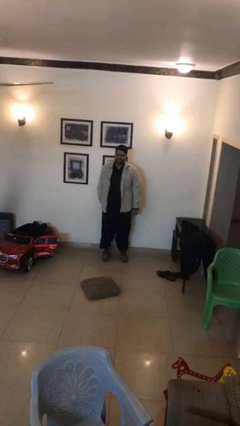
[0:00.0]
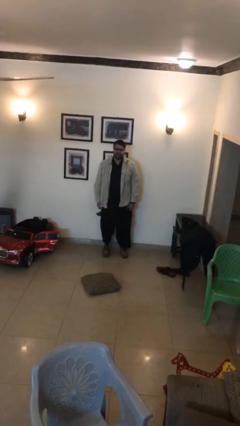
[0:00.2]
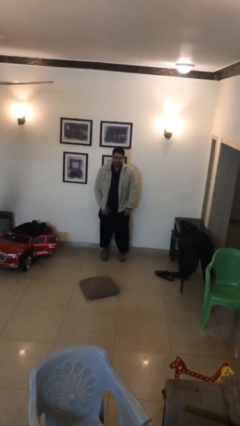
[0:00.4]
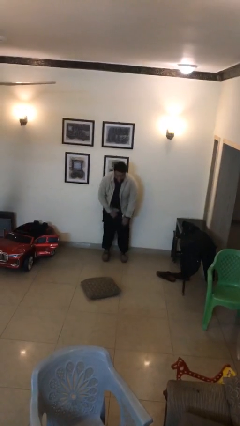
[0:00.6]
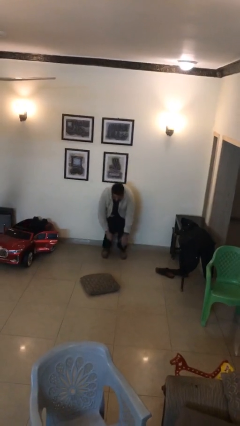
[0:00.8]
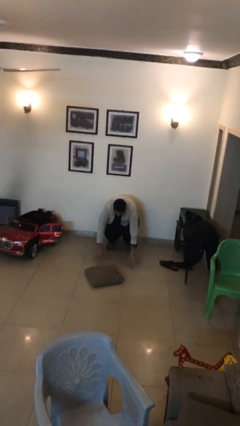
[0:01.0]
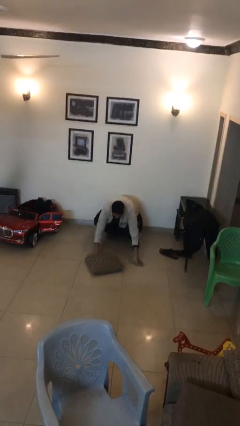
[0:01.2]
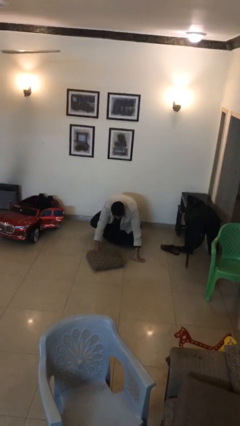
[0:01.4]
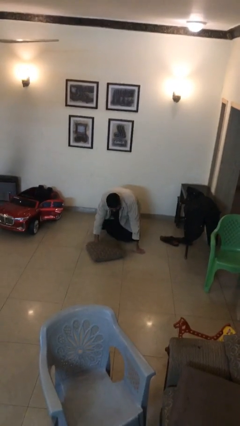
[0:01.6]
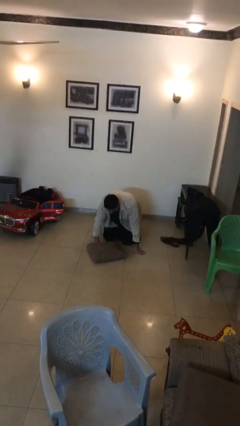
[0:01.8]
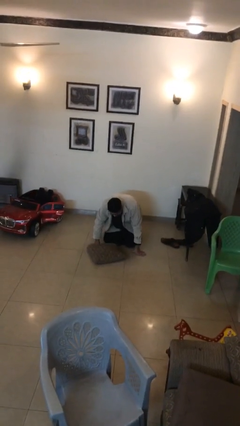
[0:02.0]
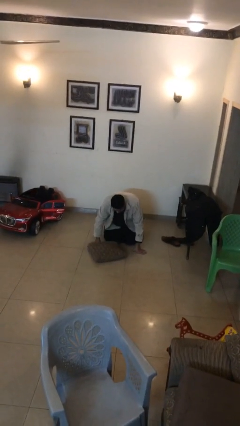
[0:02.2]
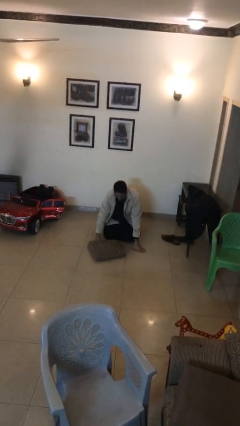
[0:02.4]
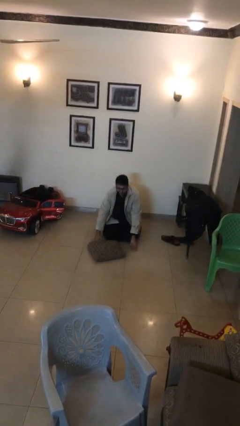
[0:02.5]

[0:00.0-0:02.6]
person sits down

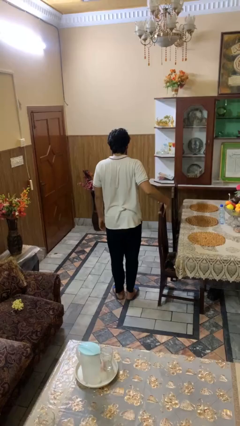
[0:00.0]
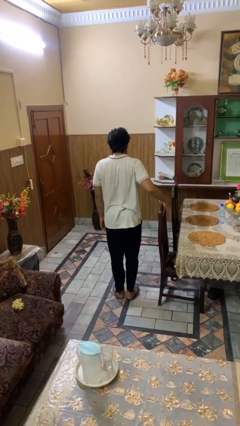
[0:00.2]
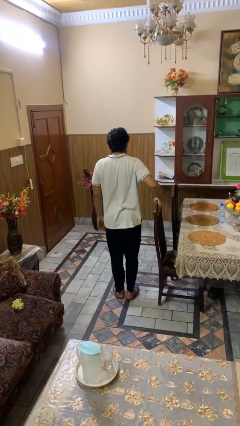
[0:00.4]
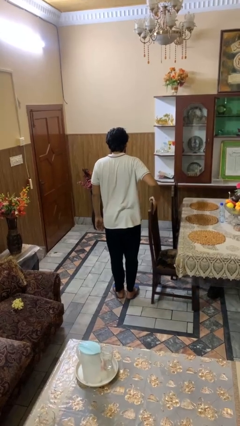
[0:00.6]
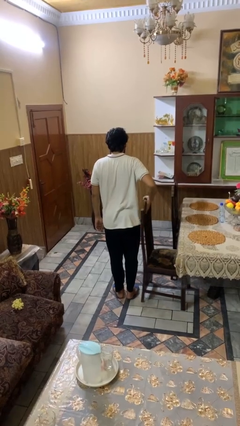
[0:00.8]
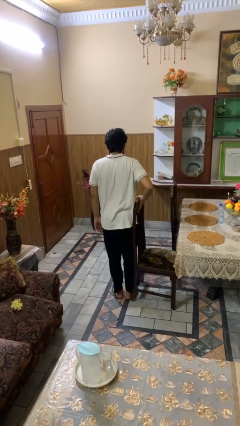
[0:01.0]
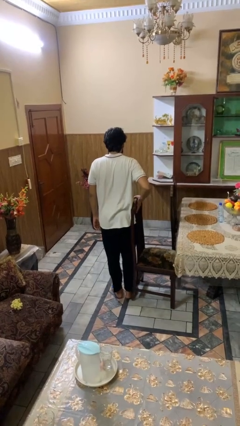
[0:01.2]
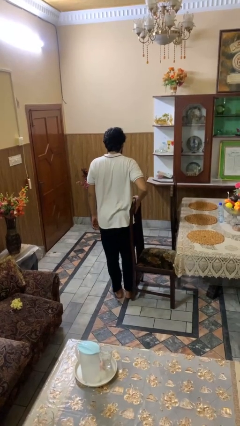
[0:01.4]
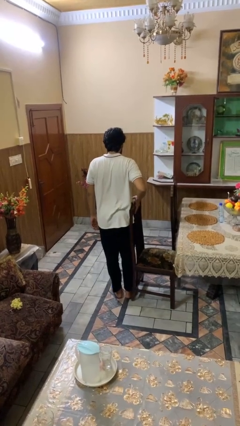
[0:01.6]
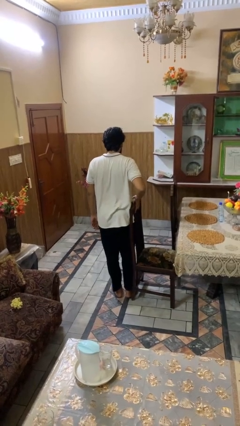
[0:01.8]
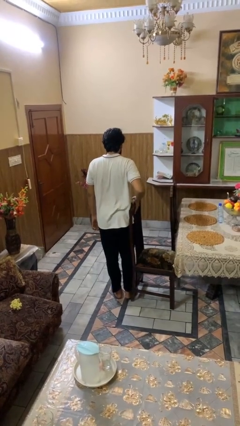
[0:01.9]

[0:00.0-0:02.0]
person pulls out chair

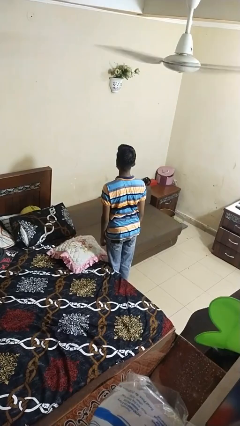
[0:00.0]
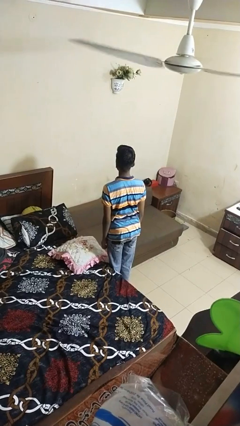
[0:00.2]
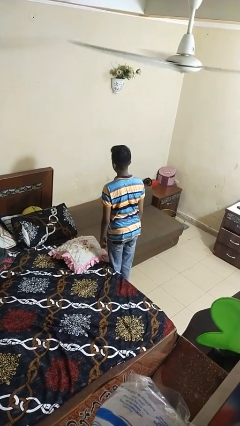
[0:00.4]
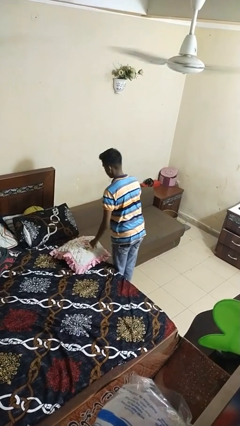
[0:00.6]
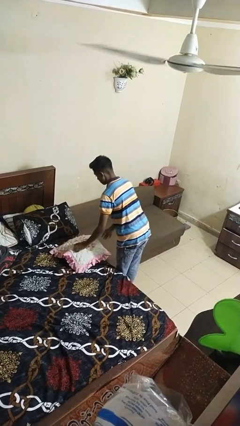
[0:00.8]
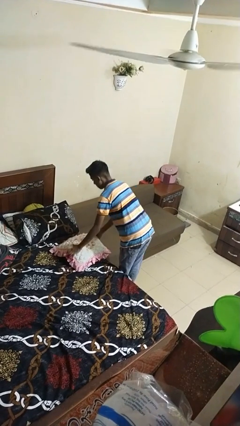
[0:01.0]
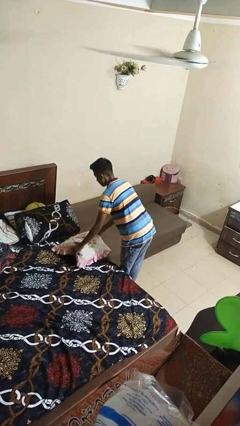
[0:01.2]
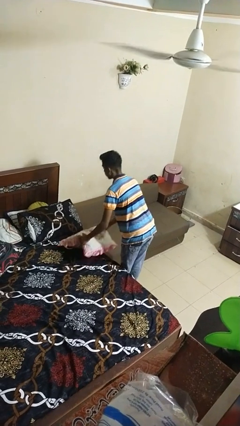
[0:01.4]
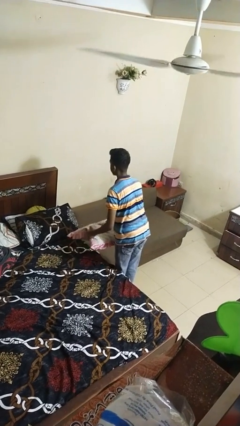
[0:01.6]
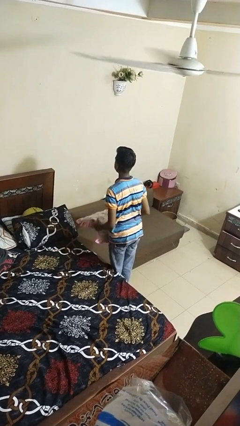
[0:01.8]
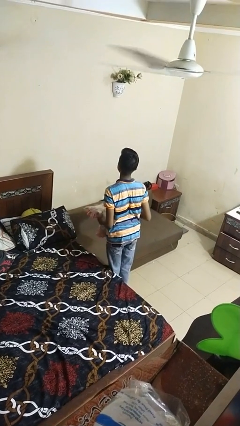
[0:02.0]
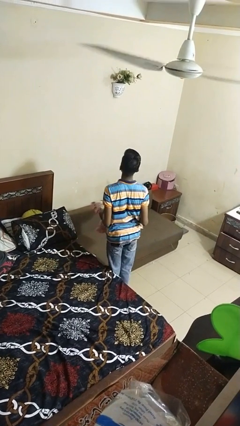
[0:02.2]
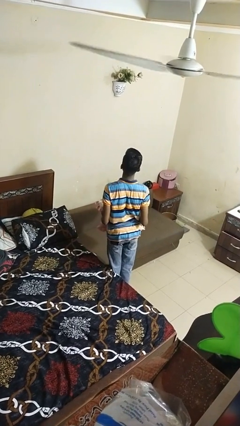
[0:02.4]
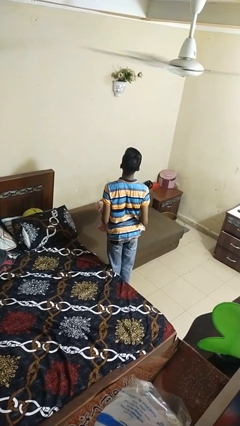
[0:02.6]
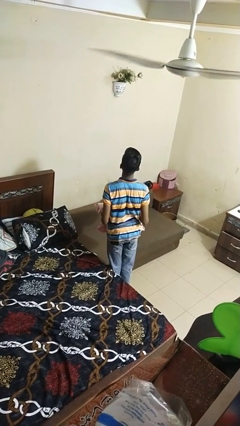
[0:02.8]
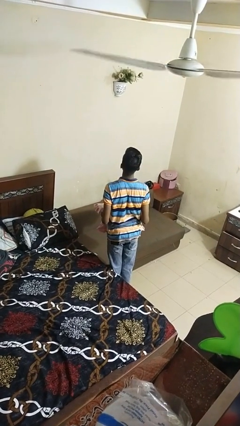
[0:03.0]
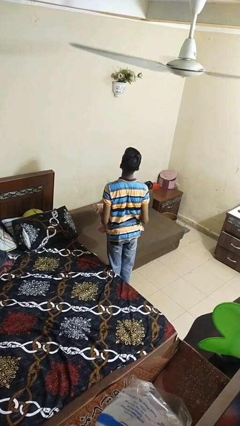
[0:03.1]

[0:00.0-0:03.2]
person picks up object from bed

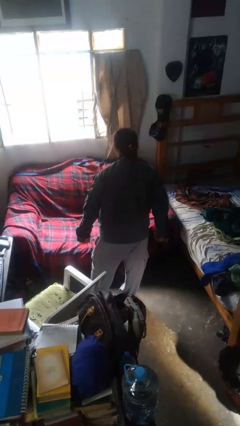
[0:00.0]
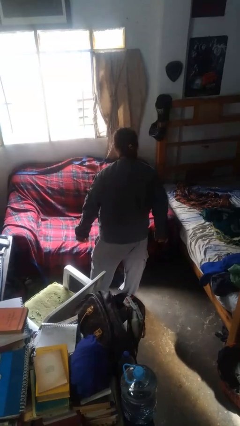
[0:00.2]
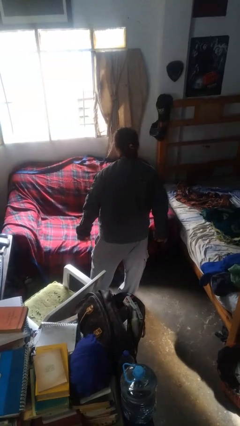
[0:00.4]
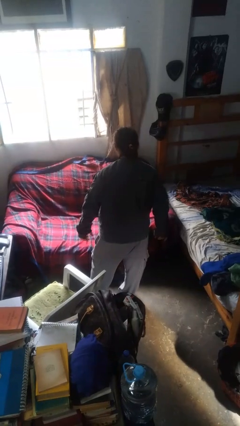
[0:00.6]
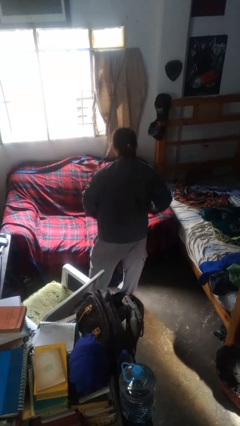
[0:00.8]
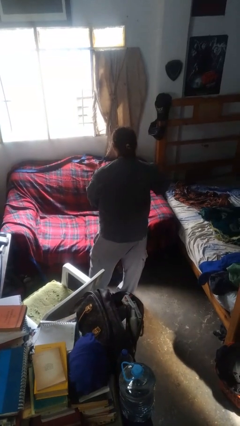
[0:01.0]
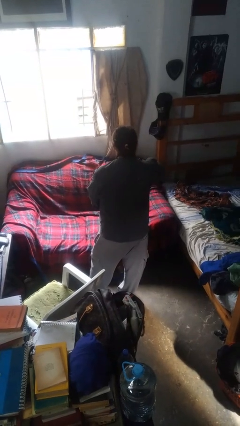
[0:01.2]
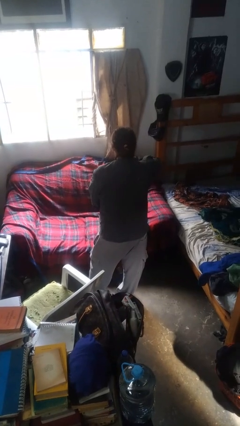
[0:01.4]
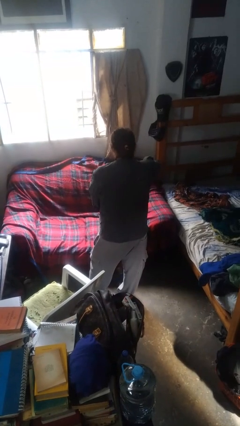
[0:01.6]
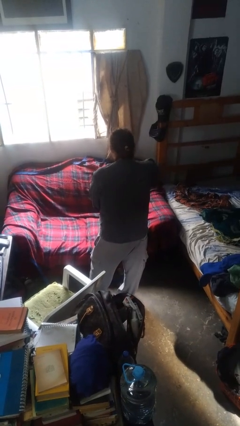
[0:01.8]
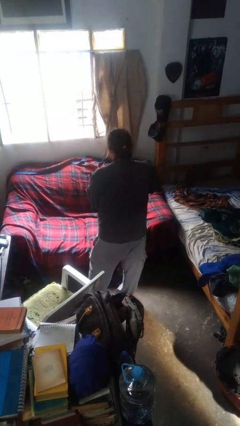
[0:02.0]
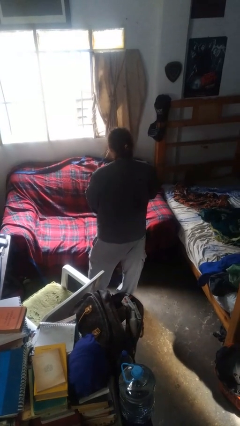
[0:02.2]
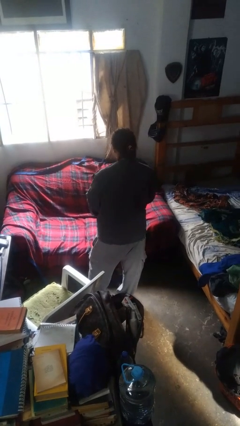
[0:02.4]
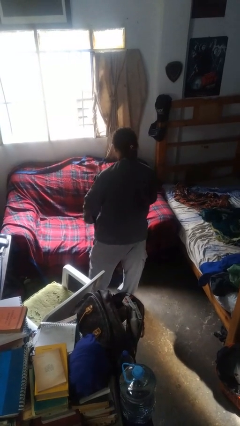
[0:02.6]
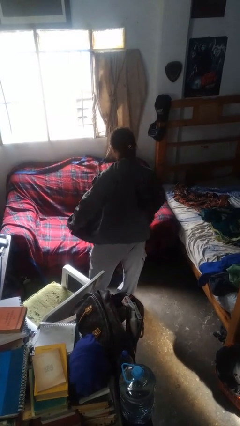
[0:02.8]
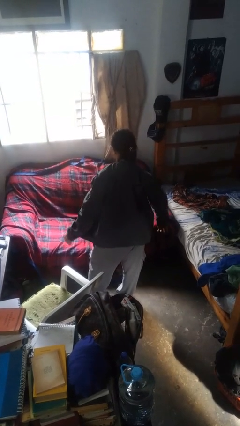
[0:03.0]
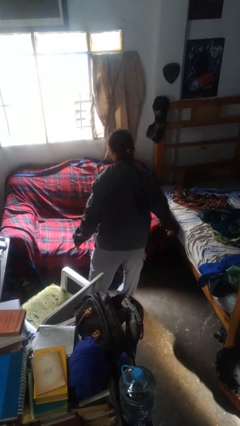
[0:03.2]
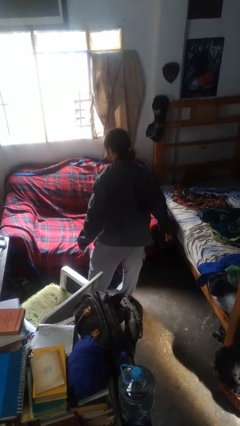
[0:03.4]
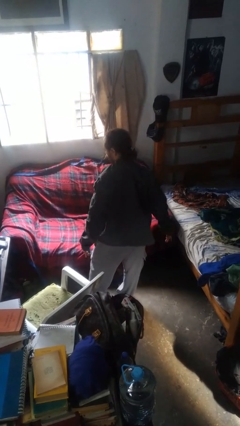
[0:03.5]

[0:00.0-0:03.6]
person unzips jacket

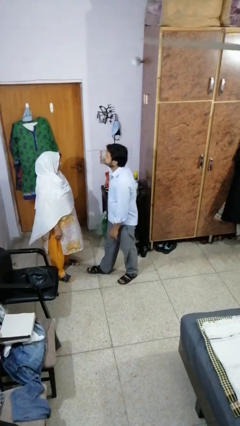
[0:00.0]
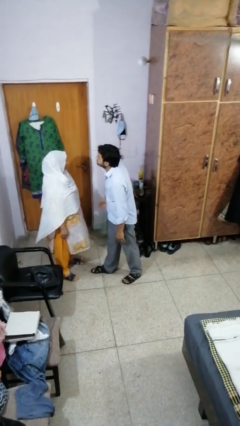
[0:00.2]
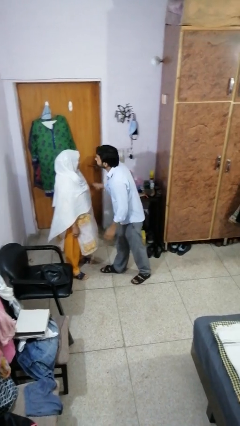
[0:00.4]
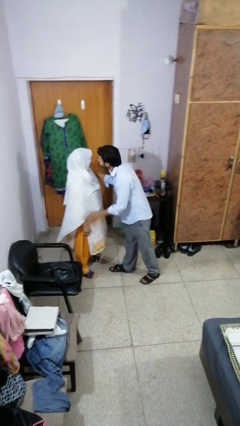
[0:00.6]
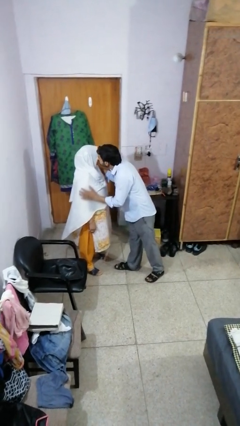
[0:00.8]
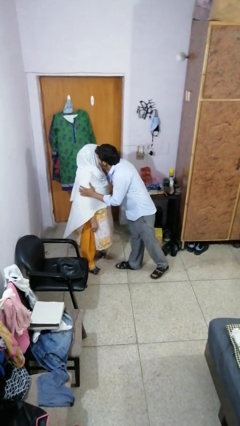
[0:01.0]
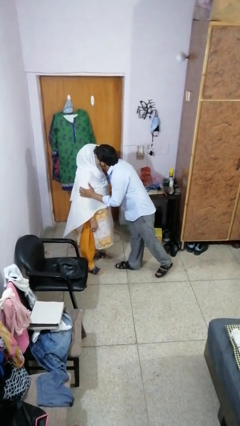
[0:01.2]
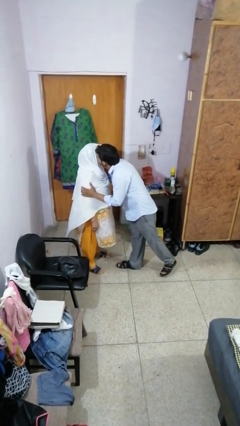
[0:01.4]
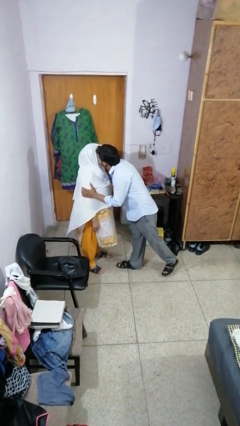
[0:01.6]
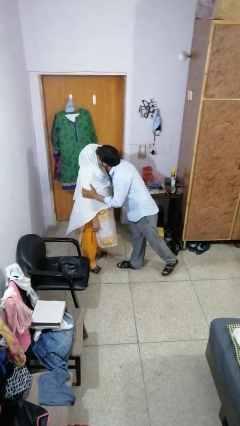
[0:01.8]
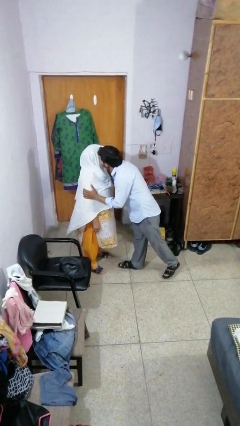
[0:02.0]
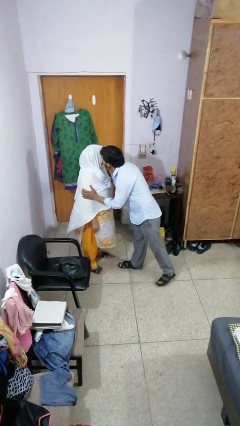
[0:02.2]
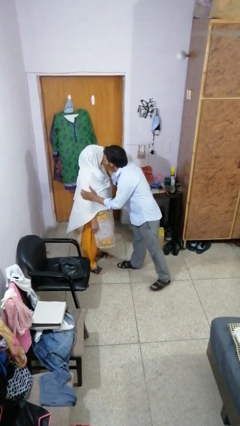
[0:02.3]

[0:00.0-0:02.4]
person kisses cheek of person

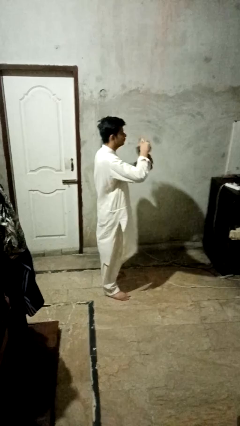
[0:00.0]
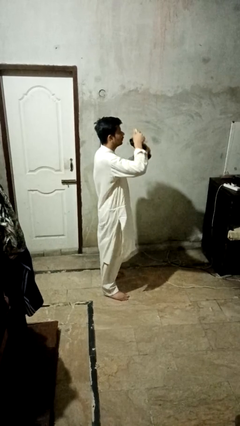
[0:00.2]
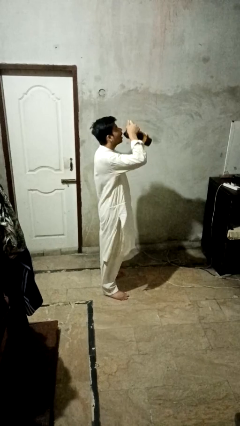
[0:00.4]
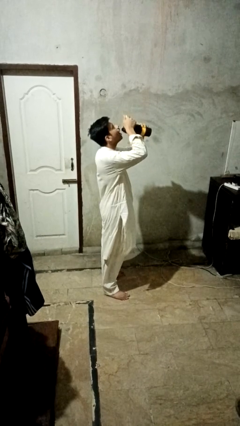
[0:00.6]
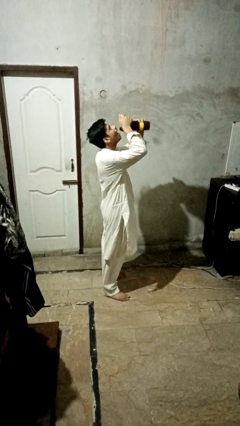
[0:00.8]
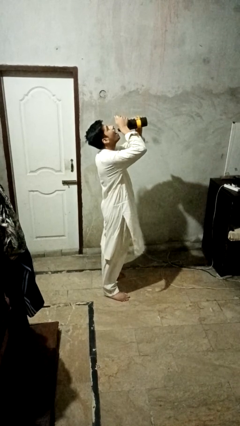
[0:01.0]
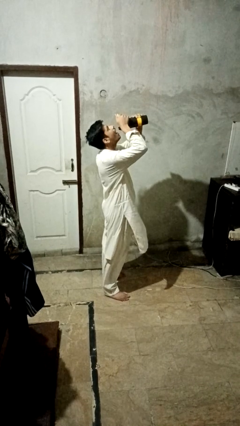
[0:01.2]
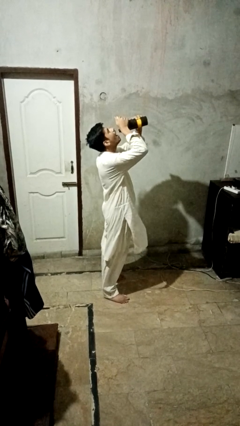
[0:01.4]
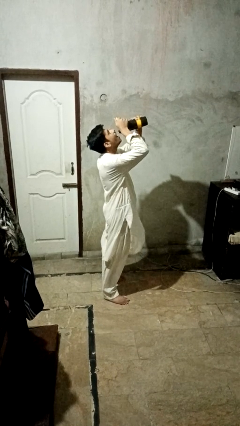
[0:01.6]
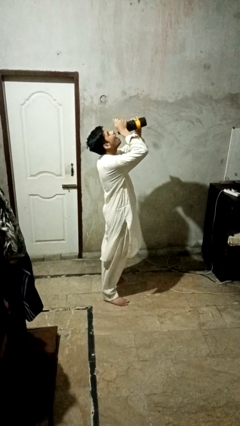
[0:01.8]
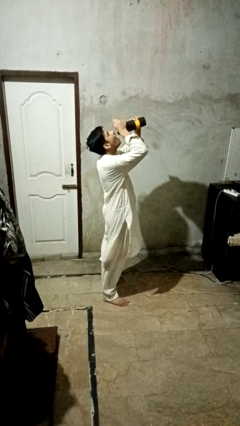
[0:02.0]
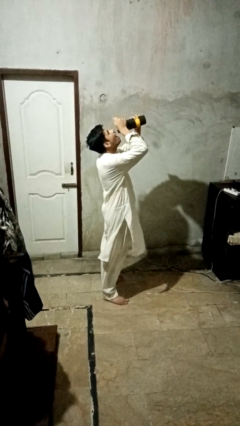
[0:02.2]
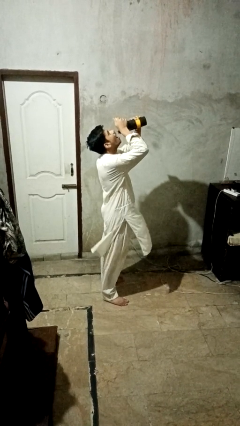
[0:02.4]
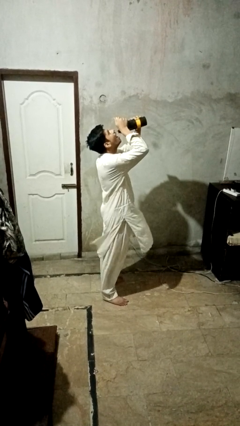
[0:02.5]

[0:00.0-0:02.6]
person drinks from bottle

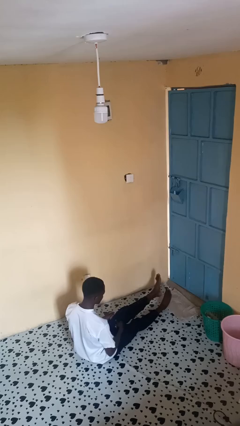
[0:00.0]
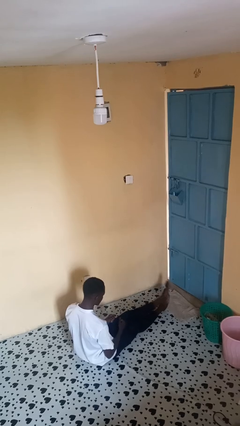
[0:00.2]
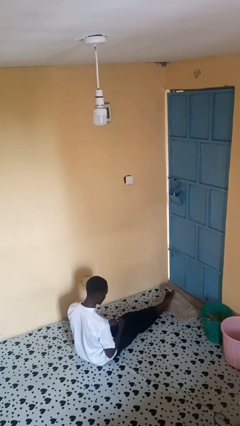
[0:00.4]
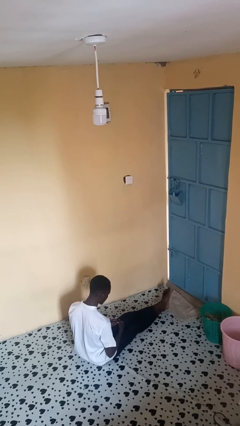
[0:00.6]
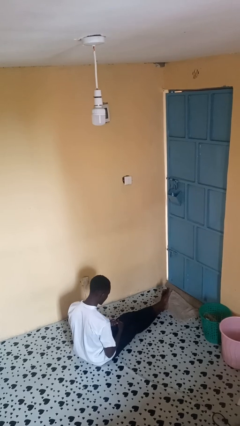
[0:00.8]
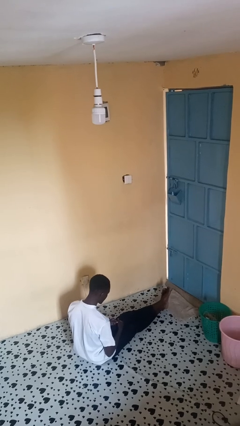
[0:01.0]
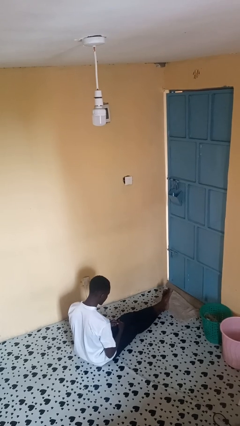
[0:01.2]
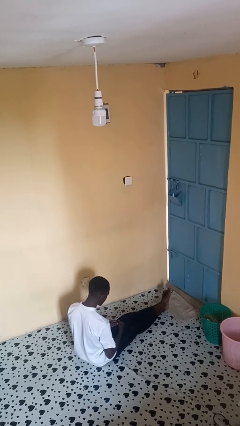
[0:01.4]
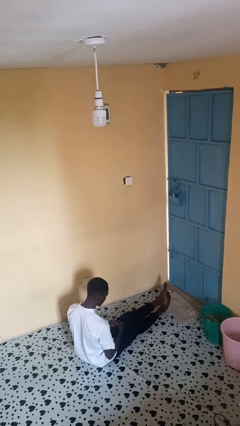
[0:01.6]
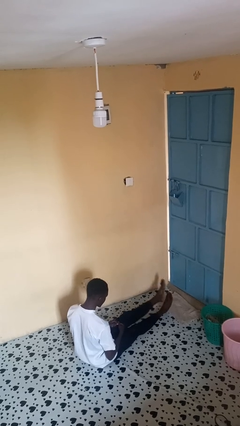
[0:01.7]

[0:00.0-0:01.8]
person crosses legs
